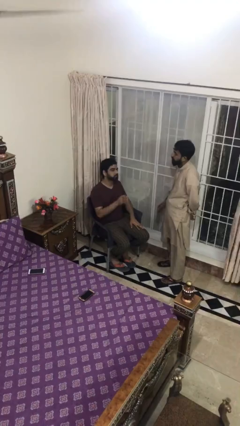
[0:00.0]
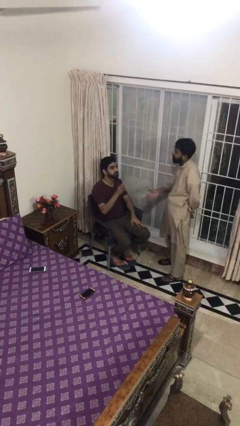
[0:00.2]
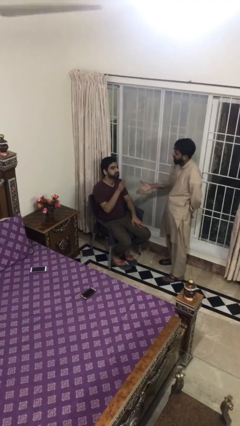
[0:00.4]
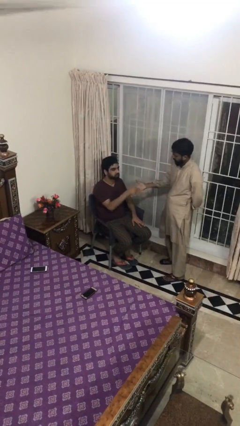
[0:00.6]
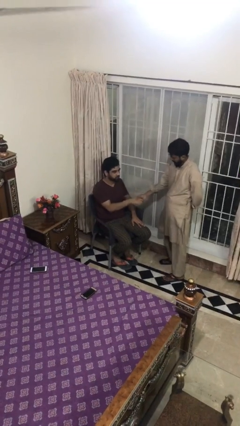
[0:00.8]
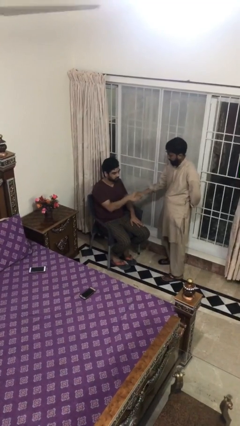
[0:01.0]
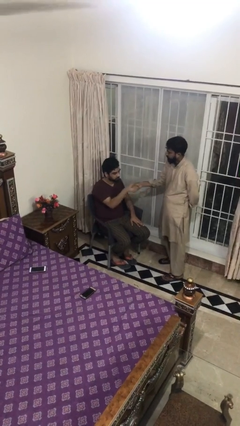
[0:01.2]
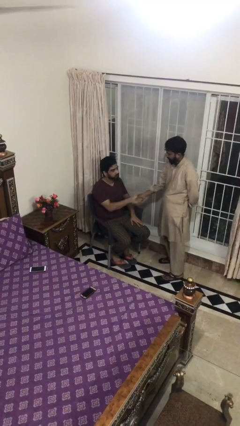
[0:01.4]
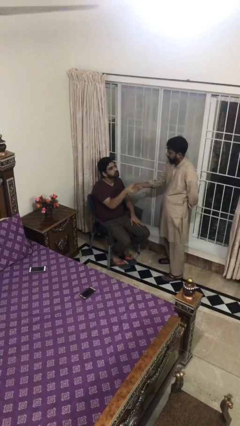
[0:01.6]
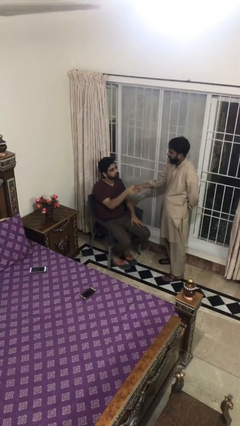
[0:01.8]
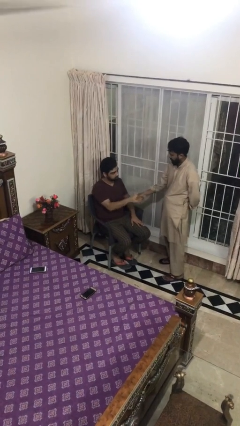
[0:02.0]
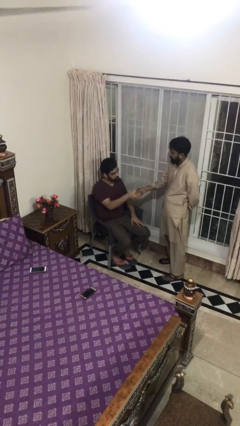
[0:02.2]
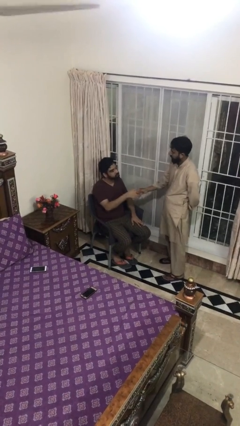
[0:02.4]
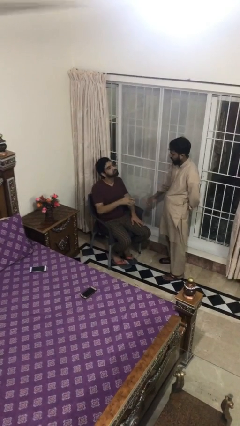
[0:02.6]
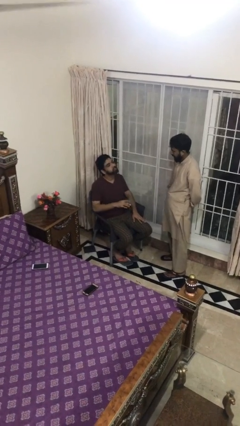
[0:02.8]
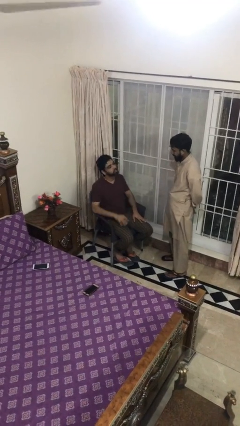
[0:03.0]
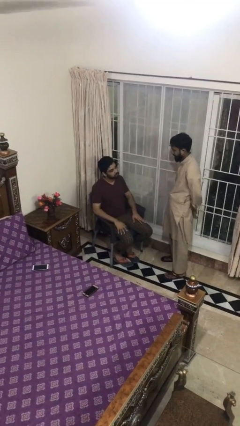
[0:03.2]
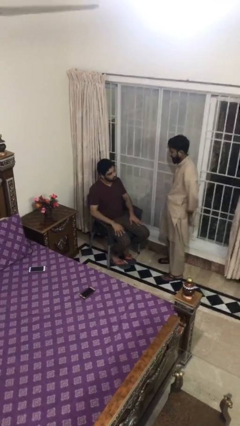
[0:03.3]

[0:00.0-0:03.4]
person shakes hand

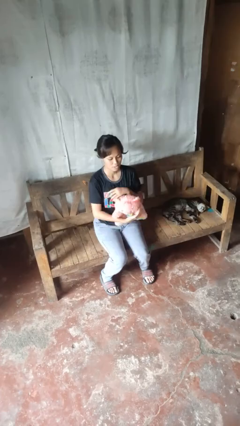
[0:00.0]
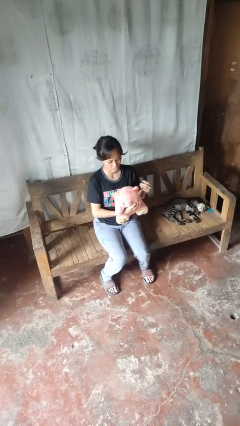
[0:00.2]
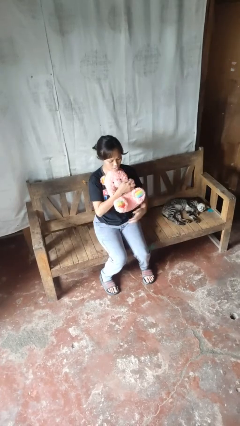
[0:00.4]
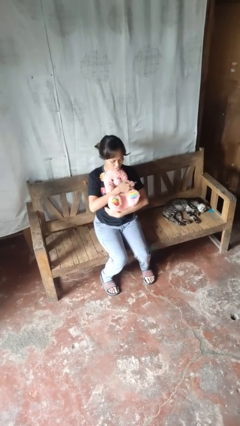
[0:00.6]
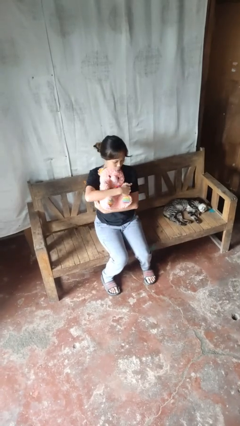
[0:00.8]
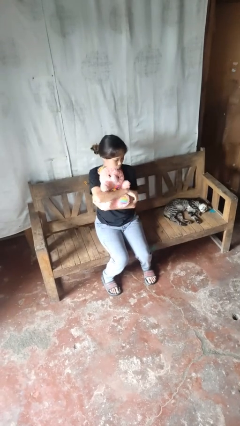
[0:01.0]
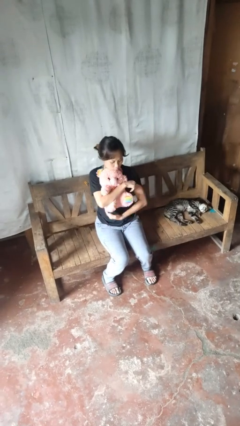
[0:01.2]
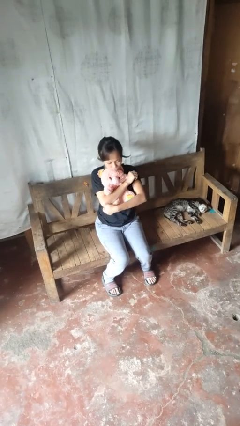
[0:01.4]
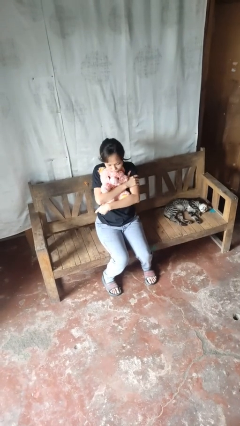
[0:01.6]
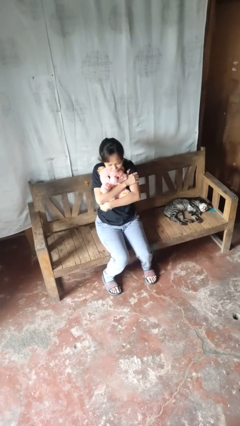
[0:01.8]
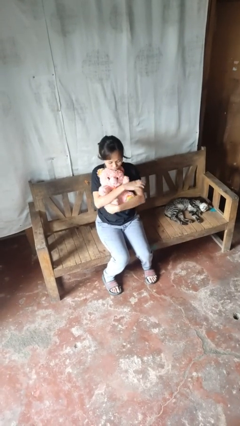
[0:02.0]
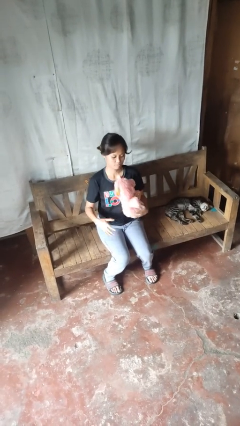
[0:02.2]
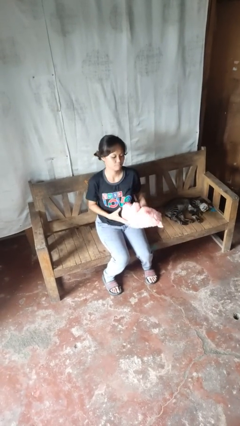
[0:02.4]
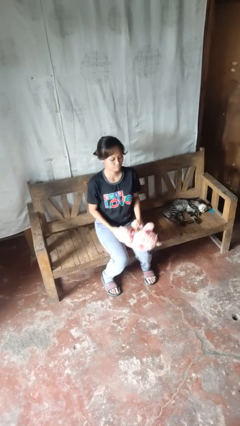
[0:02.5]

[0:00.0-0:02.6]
person hugs stuffed animal

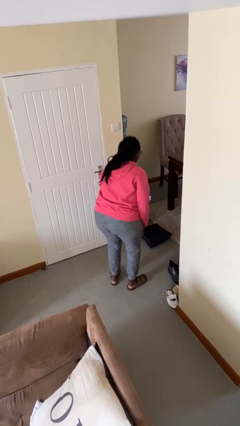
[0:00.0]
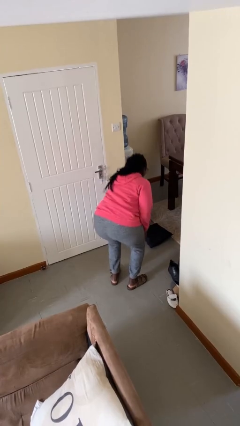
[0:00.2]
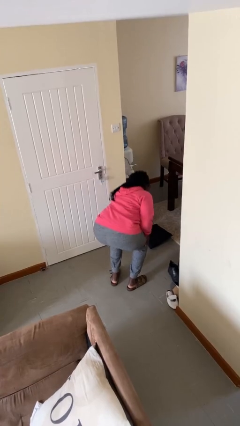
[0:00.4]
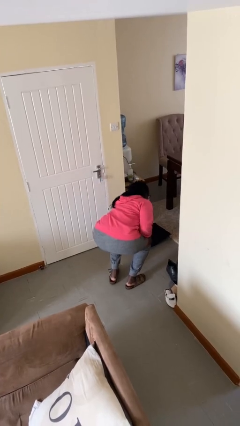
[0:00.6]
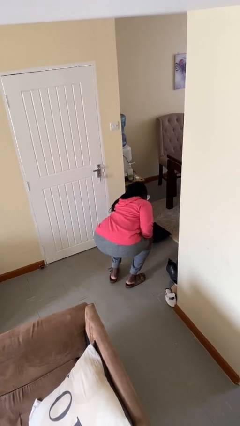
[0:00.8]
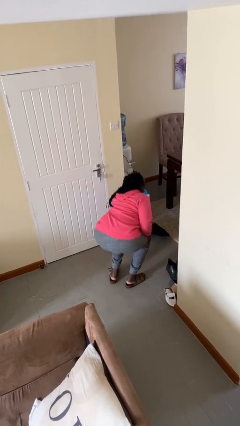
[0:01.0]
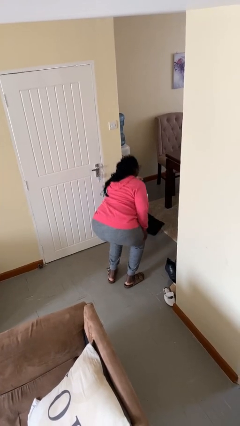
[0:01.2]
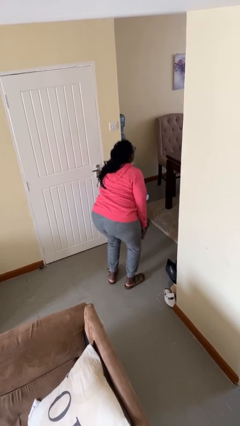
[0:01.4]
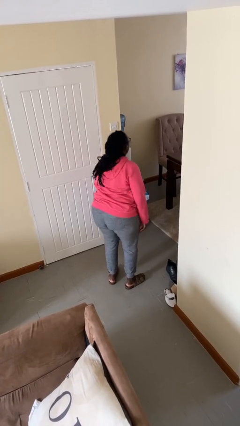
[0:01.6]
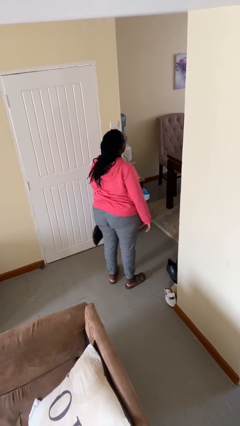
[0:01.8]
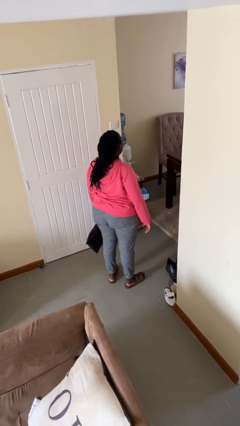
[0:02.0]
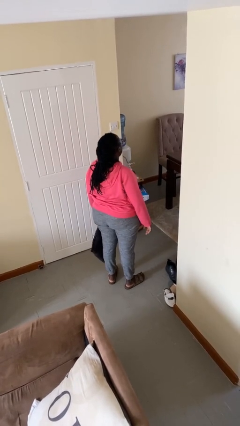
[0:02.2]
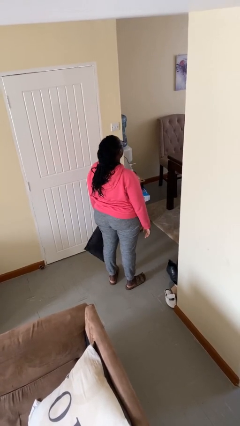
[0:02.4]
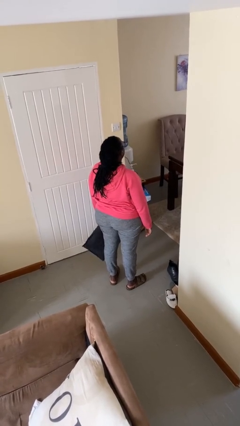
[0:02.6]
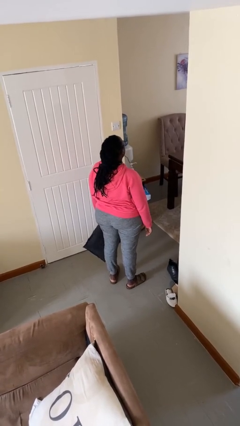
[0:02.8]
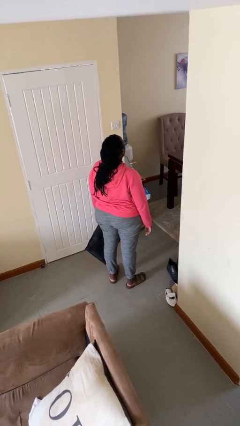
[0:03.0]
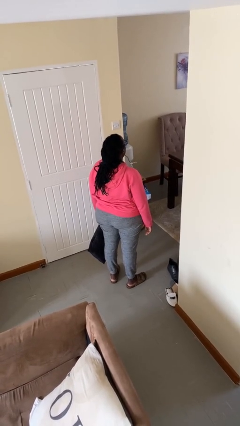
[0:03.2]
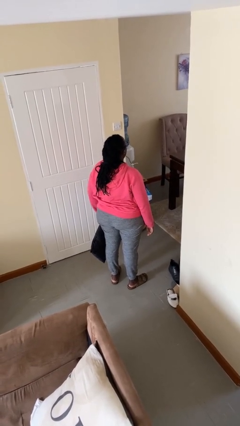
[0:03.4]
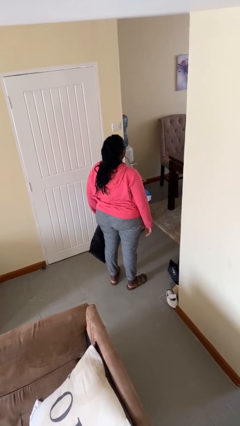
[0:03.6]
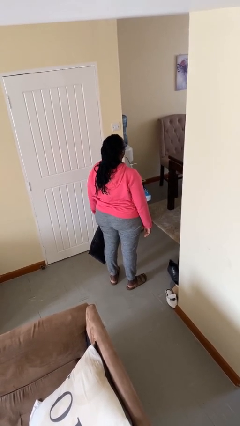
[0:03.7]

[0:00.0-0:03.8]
person picks up object from floor

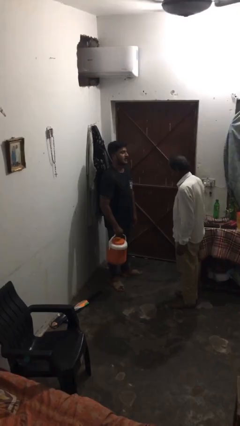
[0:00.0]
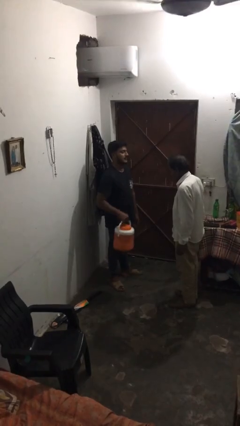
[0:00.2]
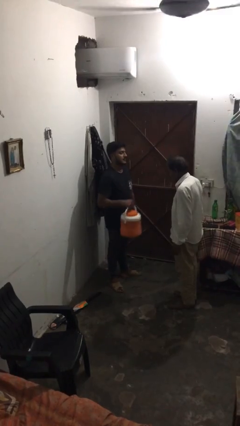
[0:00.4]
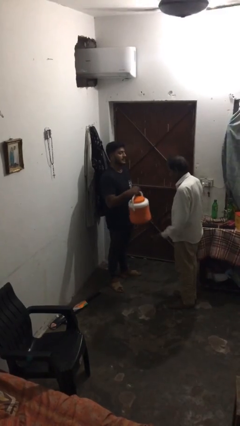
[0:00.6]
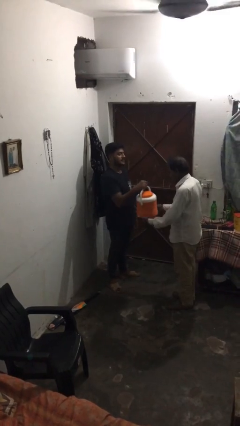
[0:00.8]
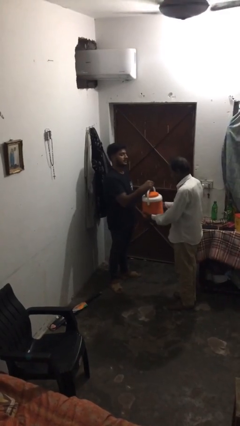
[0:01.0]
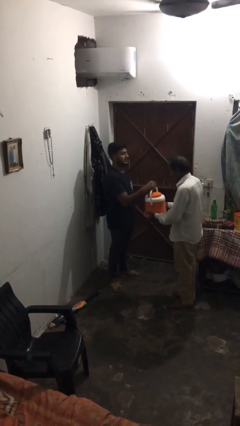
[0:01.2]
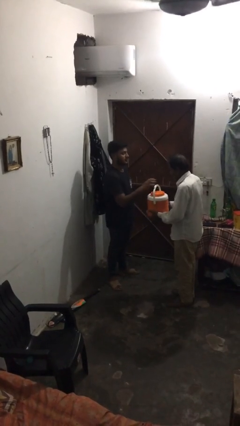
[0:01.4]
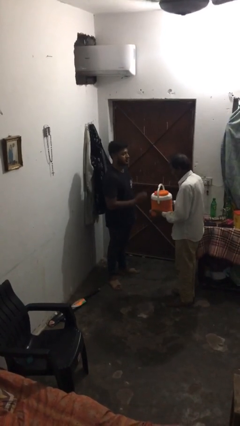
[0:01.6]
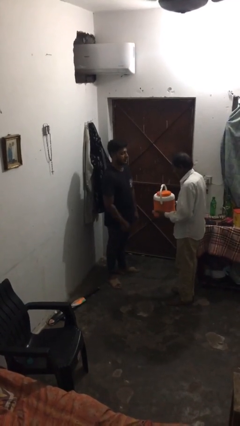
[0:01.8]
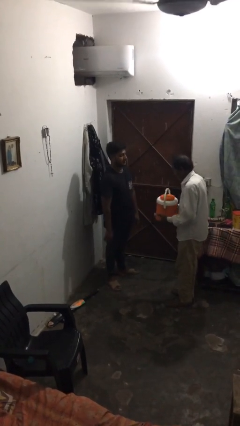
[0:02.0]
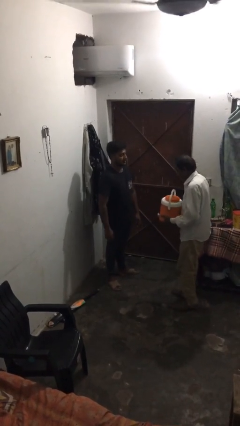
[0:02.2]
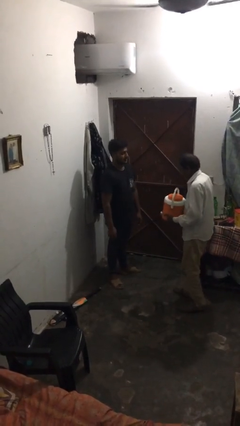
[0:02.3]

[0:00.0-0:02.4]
person transfers object to person

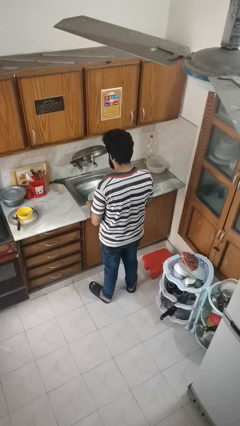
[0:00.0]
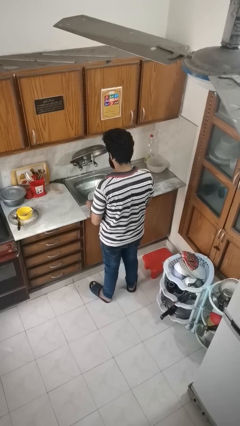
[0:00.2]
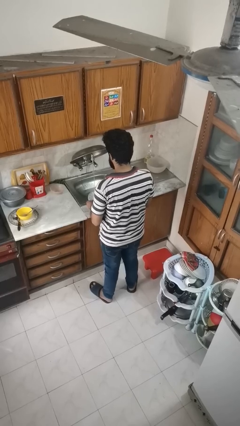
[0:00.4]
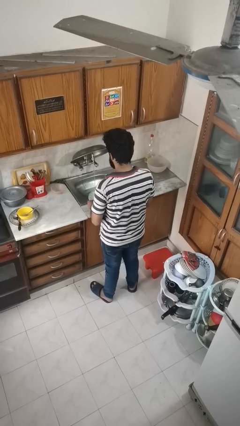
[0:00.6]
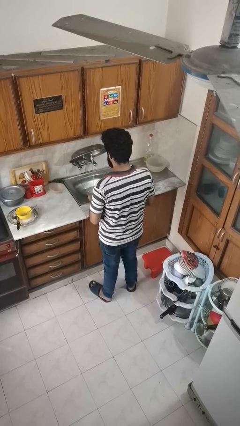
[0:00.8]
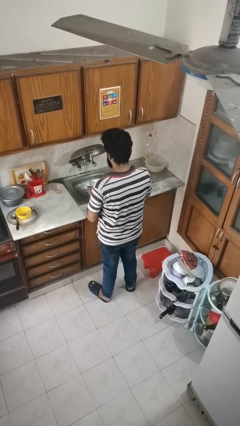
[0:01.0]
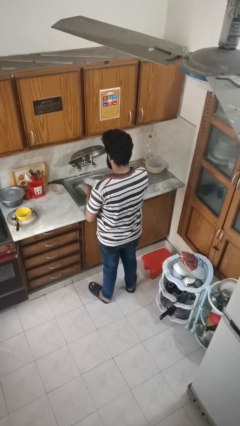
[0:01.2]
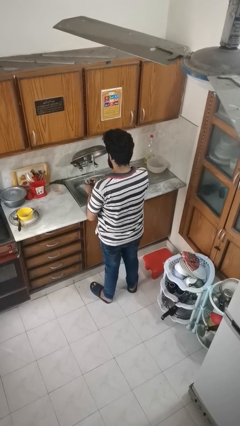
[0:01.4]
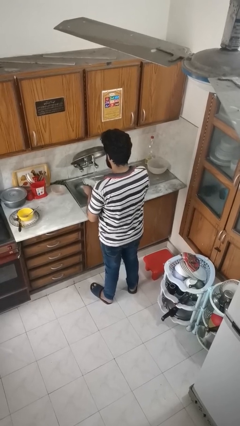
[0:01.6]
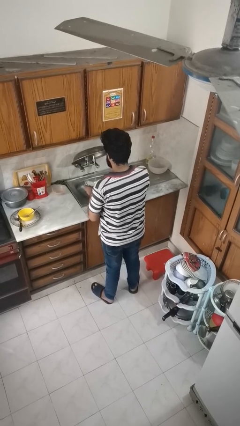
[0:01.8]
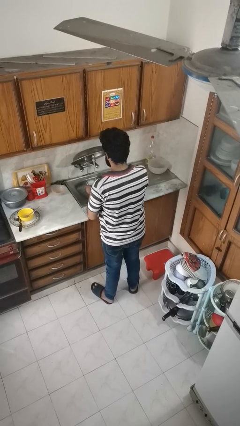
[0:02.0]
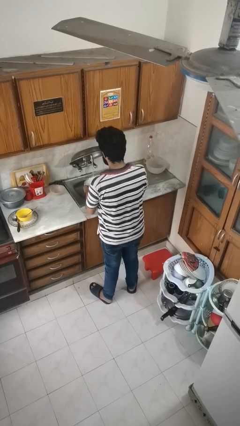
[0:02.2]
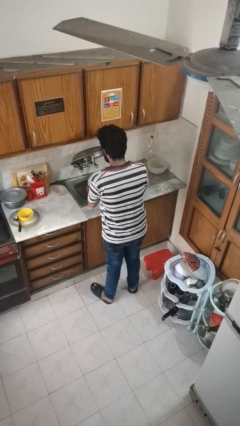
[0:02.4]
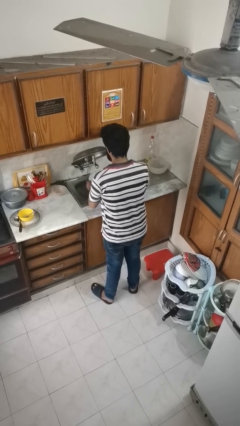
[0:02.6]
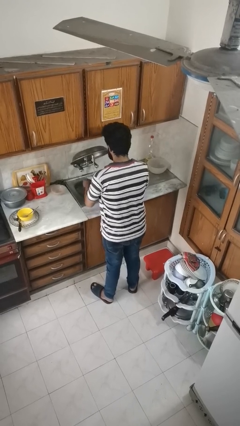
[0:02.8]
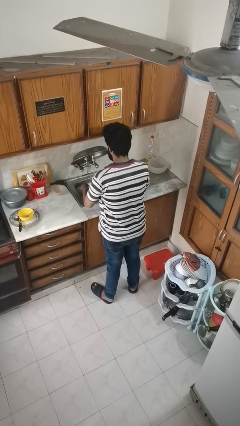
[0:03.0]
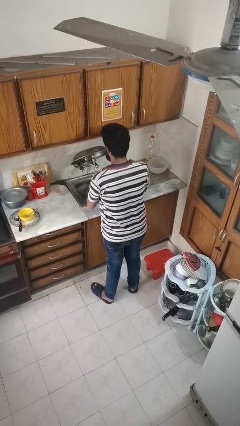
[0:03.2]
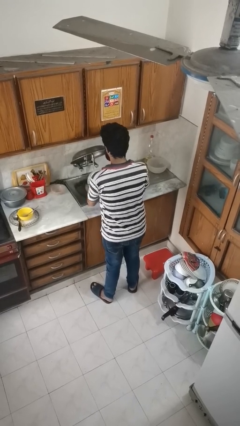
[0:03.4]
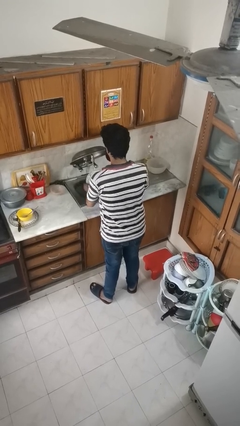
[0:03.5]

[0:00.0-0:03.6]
person washes dish

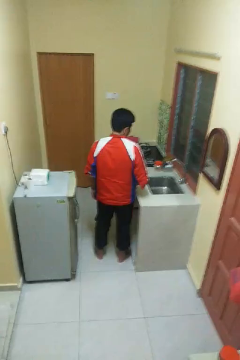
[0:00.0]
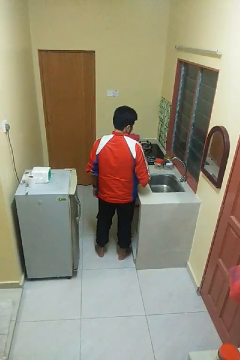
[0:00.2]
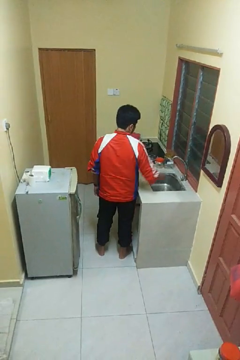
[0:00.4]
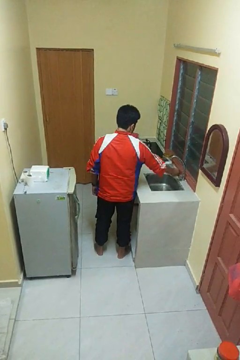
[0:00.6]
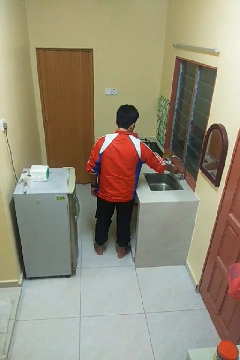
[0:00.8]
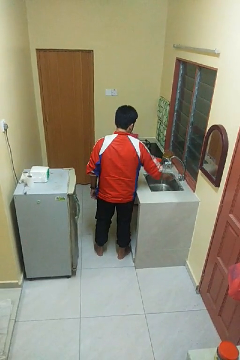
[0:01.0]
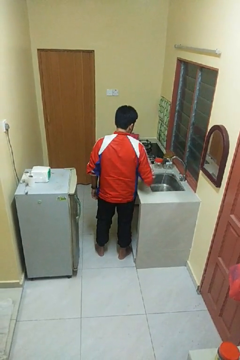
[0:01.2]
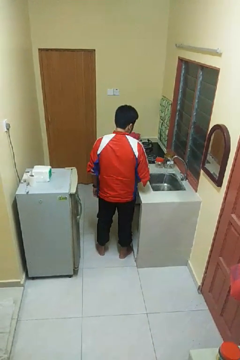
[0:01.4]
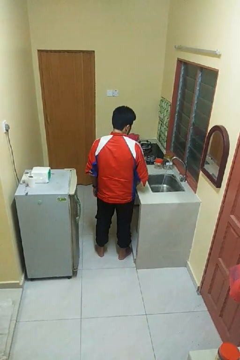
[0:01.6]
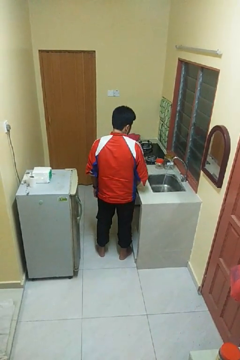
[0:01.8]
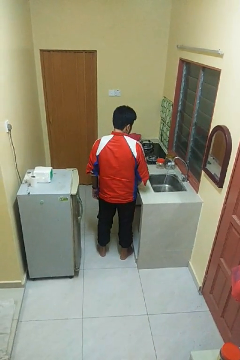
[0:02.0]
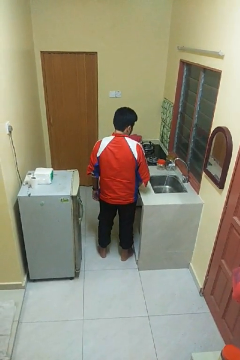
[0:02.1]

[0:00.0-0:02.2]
person turns on faucet
